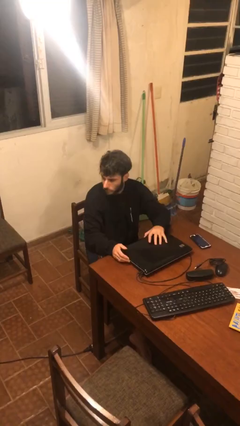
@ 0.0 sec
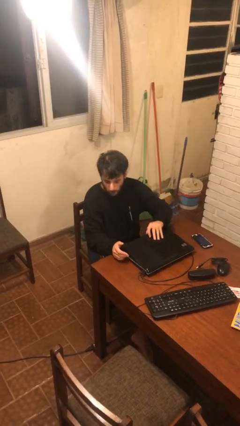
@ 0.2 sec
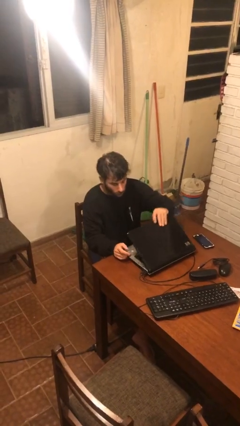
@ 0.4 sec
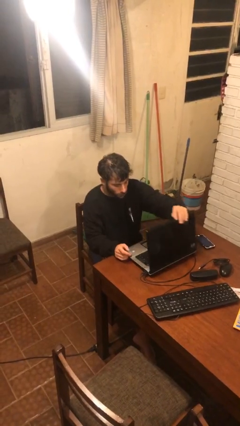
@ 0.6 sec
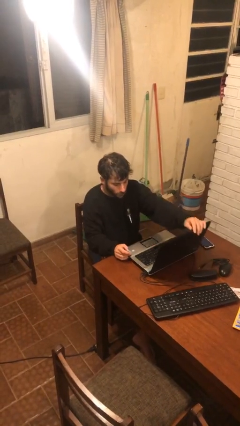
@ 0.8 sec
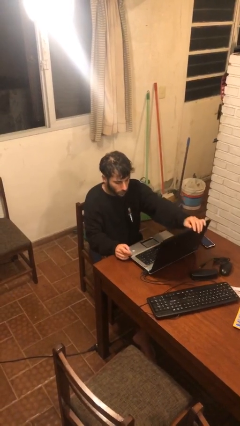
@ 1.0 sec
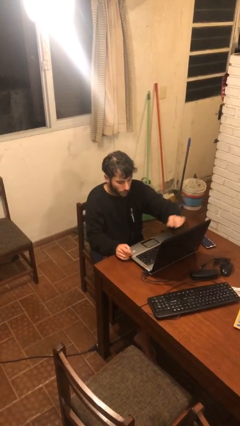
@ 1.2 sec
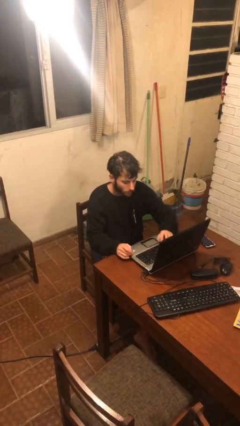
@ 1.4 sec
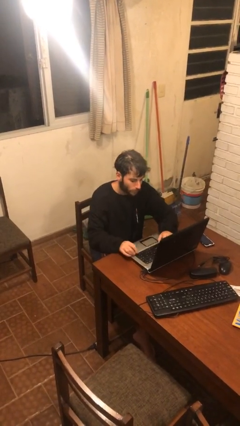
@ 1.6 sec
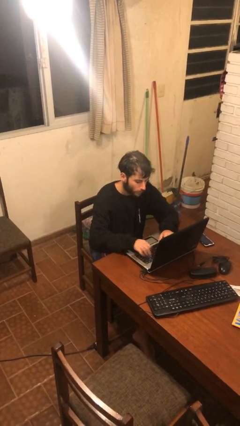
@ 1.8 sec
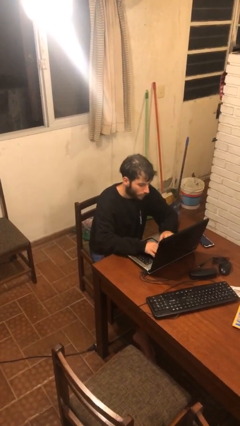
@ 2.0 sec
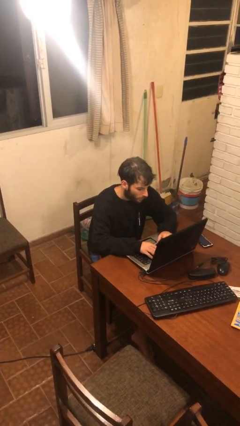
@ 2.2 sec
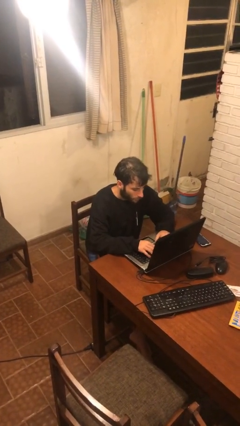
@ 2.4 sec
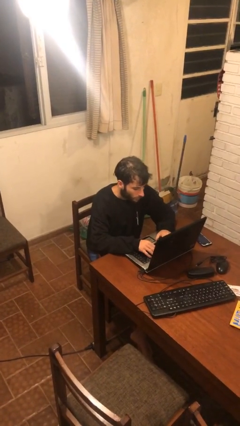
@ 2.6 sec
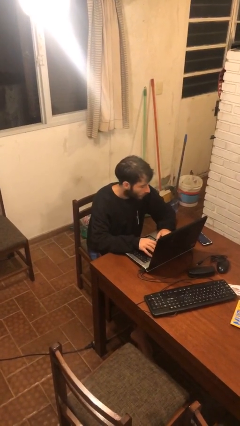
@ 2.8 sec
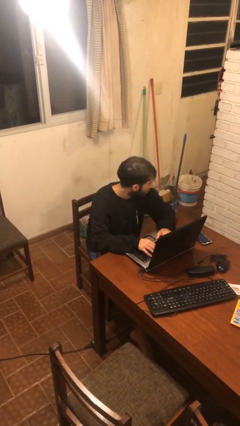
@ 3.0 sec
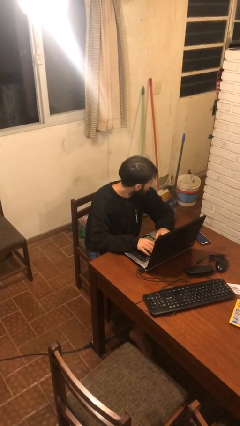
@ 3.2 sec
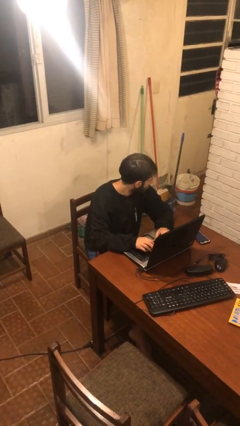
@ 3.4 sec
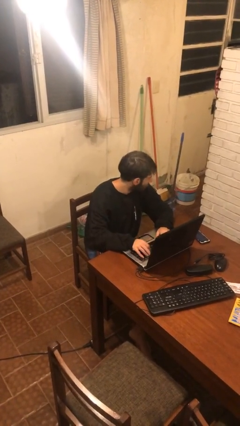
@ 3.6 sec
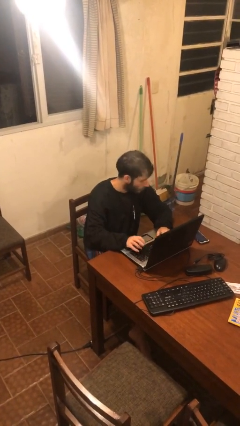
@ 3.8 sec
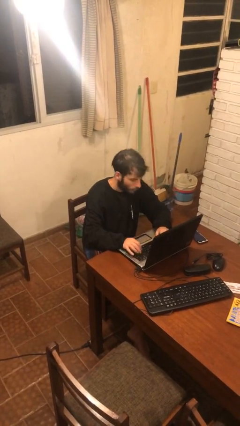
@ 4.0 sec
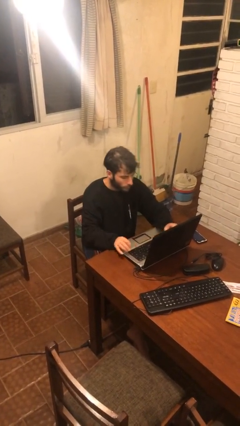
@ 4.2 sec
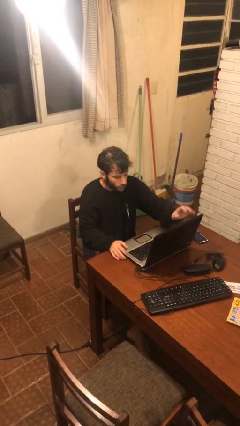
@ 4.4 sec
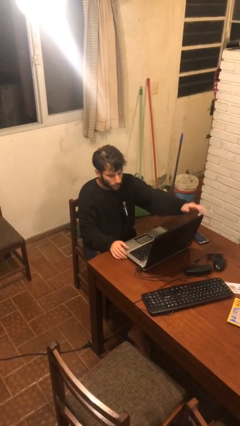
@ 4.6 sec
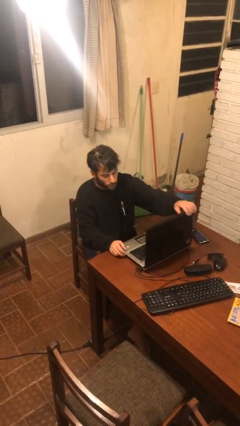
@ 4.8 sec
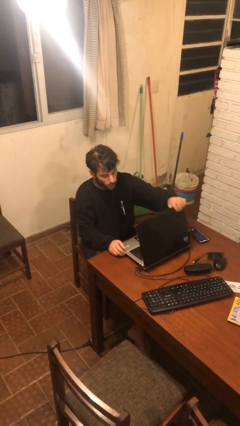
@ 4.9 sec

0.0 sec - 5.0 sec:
person interacts with laptop

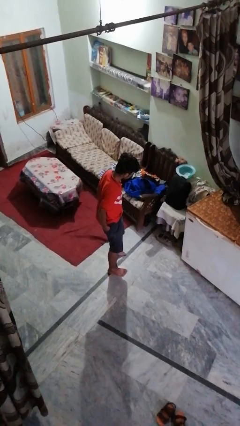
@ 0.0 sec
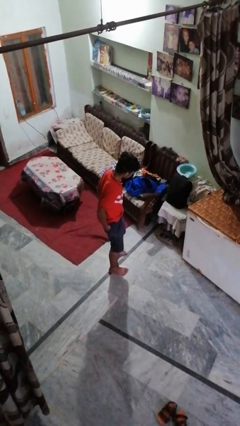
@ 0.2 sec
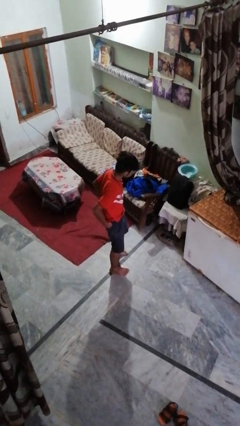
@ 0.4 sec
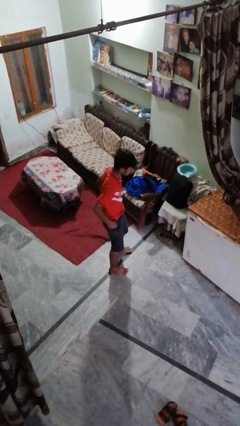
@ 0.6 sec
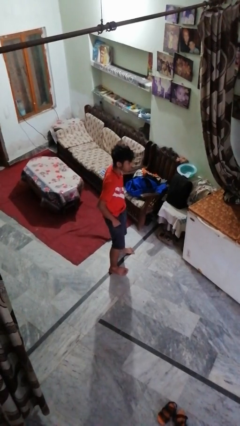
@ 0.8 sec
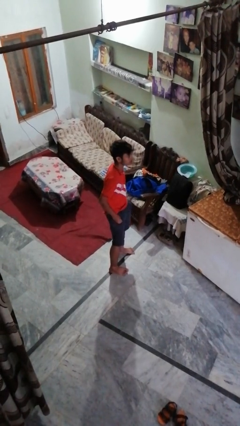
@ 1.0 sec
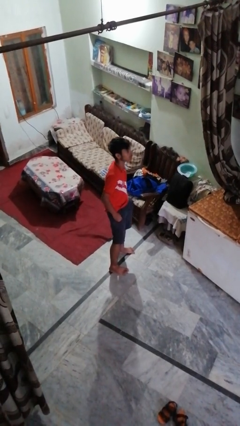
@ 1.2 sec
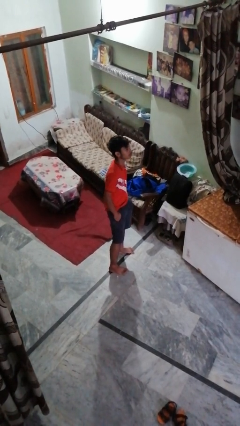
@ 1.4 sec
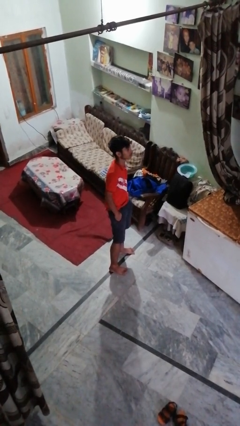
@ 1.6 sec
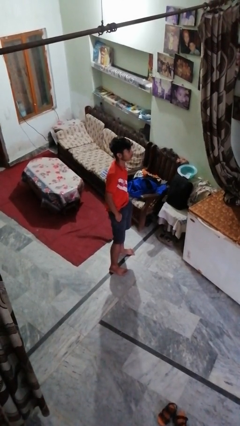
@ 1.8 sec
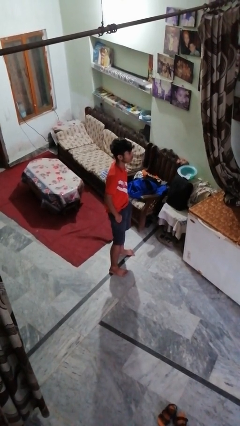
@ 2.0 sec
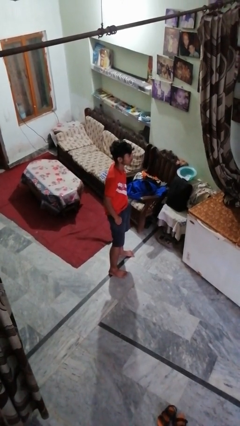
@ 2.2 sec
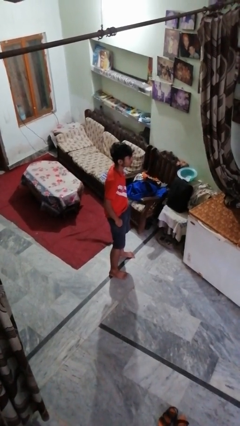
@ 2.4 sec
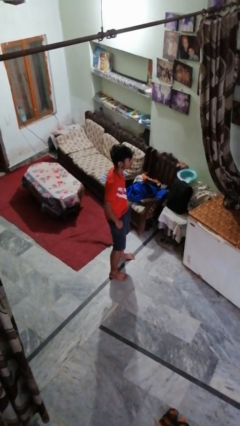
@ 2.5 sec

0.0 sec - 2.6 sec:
person puts hands in back pockets

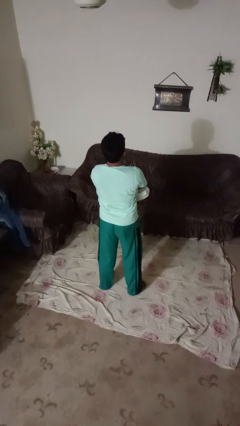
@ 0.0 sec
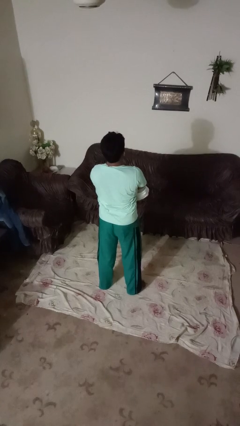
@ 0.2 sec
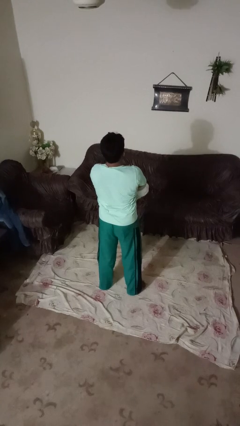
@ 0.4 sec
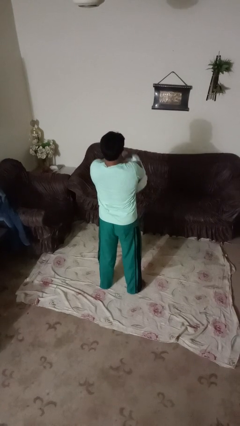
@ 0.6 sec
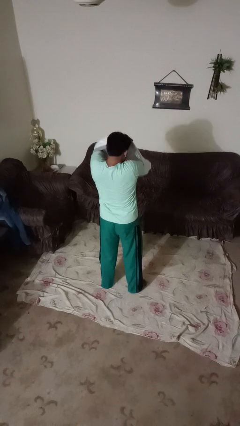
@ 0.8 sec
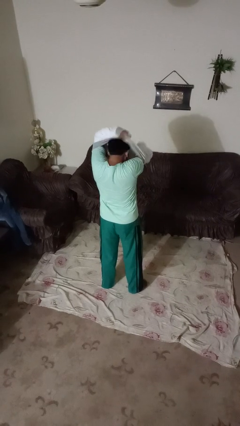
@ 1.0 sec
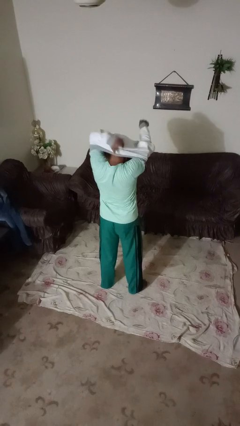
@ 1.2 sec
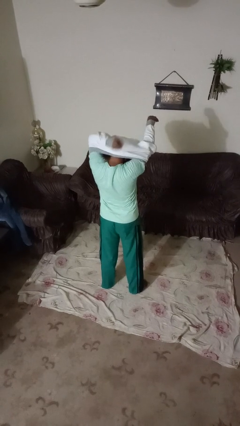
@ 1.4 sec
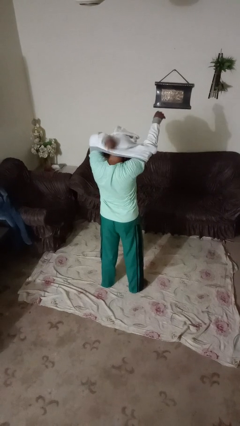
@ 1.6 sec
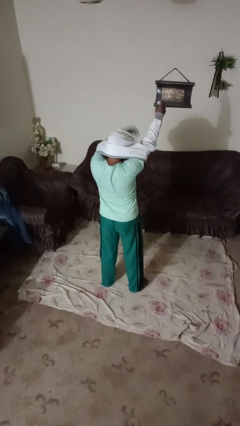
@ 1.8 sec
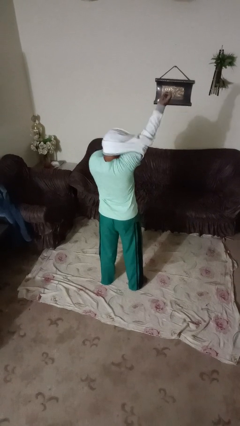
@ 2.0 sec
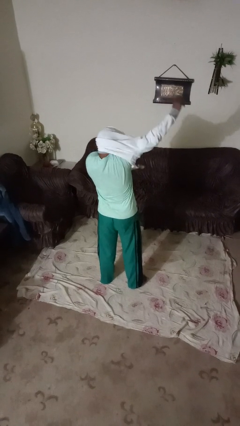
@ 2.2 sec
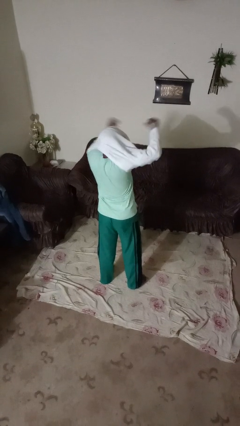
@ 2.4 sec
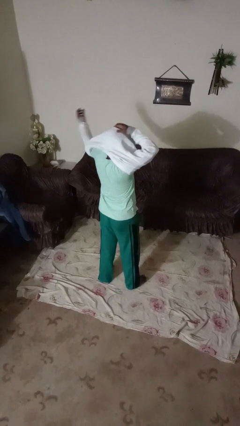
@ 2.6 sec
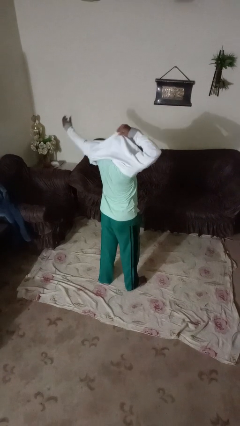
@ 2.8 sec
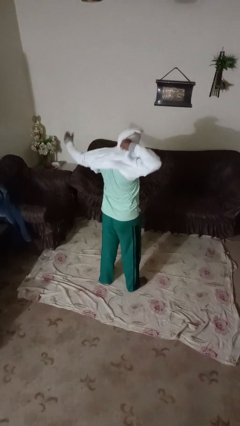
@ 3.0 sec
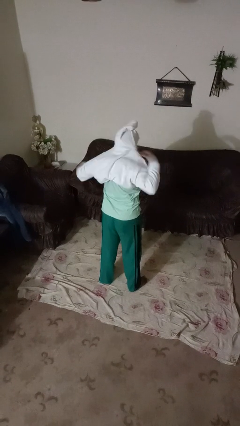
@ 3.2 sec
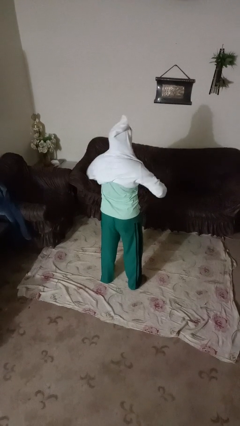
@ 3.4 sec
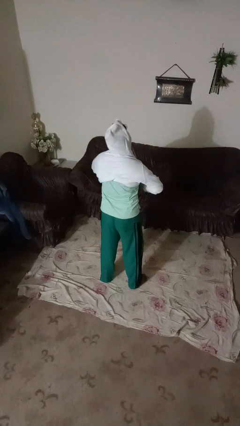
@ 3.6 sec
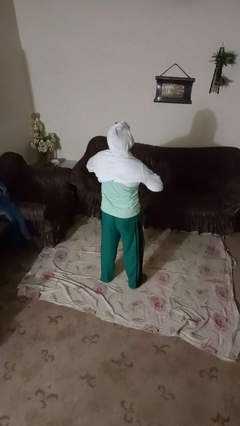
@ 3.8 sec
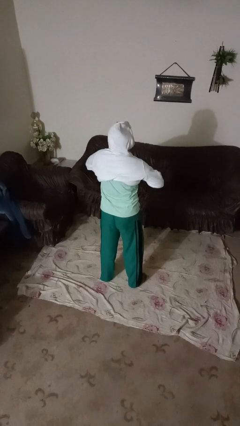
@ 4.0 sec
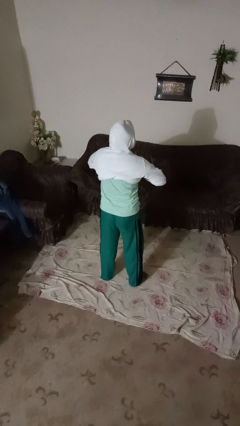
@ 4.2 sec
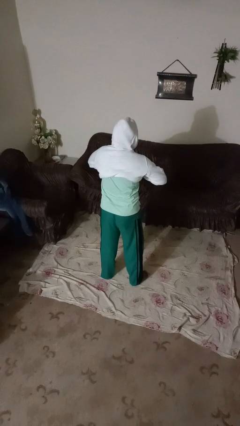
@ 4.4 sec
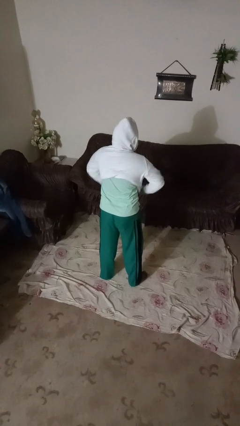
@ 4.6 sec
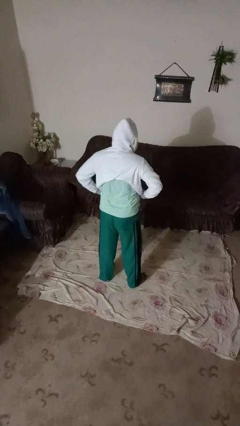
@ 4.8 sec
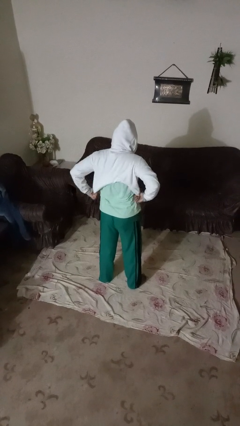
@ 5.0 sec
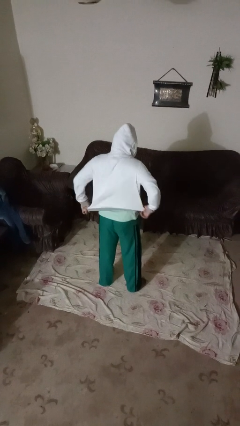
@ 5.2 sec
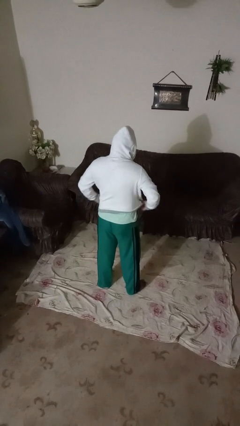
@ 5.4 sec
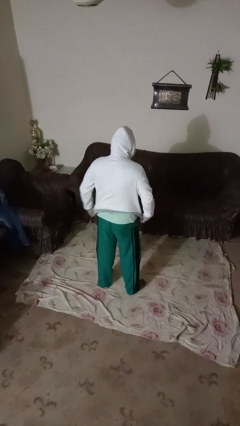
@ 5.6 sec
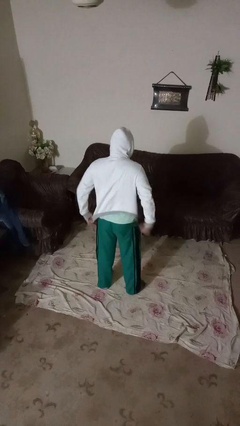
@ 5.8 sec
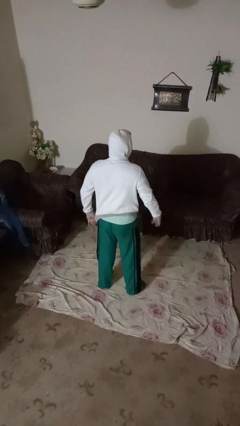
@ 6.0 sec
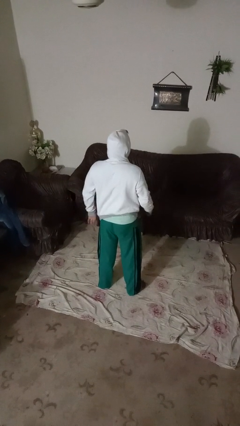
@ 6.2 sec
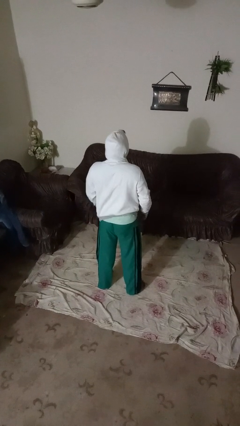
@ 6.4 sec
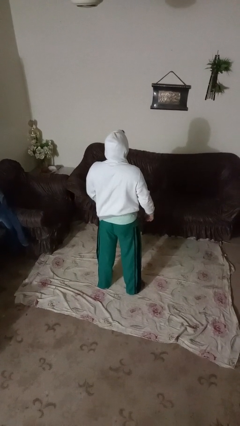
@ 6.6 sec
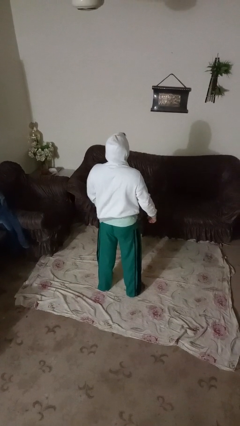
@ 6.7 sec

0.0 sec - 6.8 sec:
person puts on hoodie

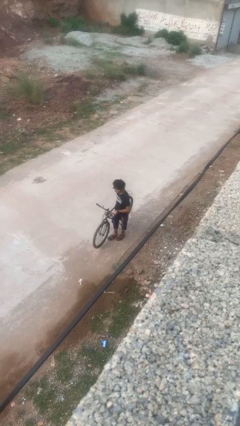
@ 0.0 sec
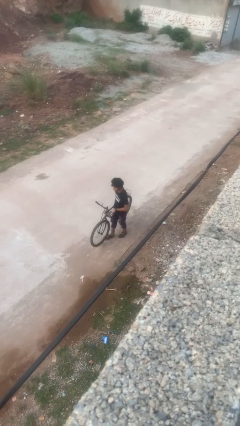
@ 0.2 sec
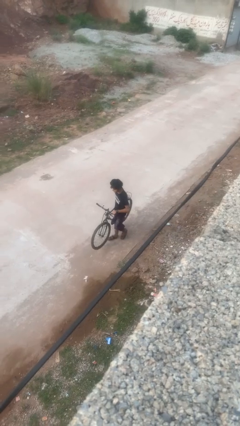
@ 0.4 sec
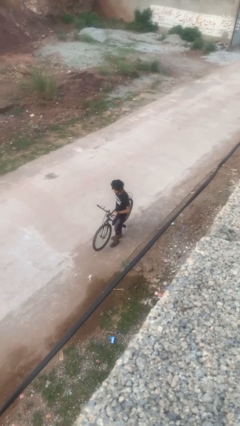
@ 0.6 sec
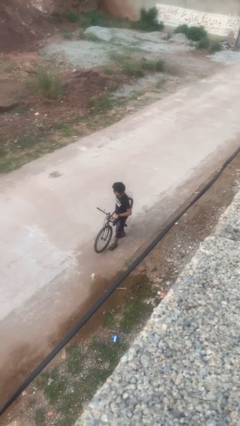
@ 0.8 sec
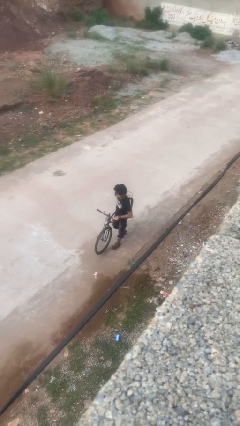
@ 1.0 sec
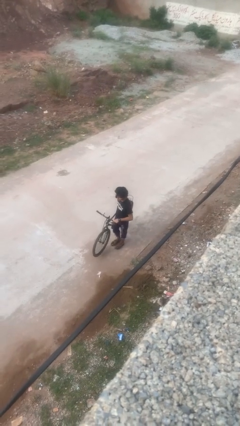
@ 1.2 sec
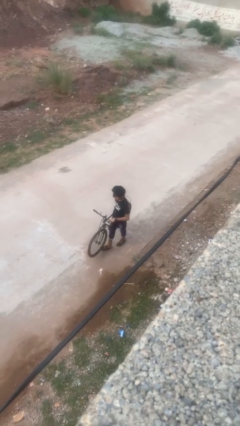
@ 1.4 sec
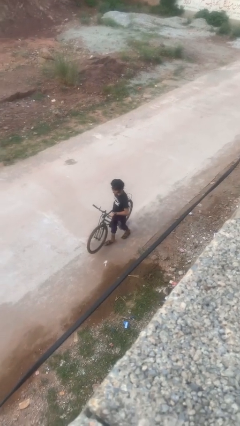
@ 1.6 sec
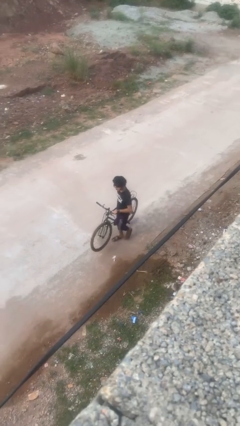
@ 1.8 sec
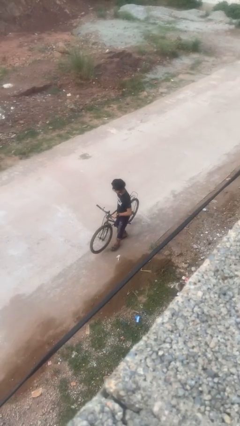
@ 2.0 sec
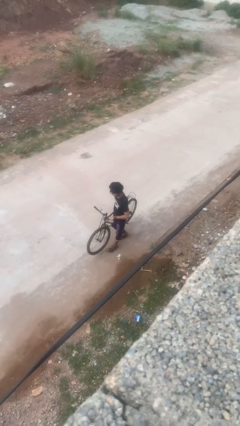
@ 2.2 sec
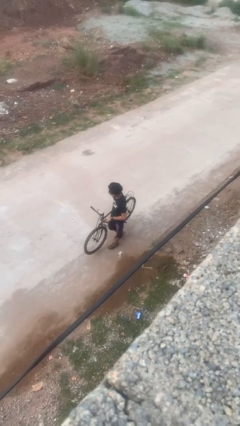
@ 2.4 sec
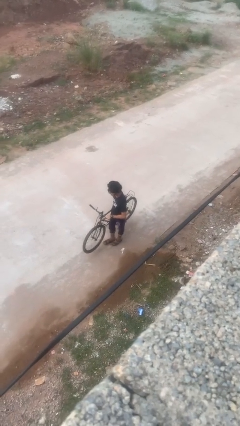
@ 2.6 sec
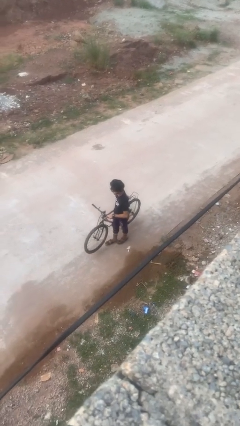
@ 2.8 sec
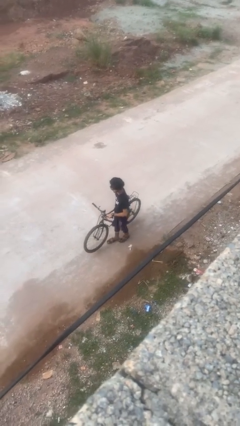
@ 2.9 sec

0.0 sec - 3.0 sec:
person carries bicycle
